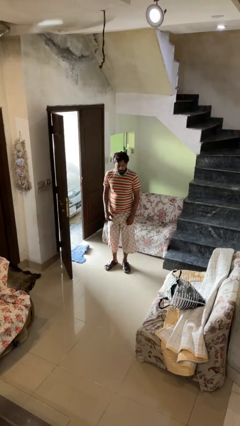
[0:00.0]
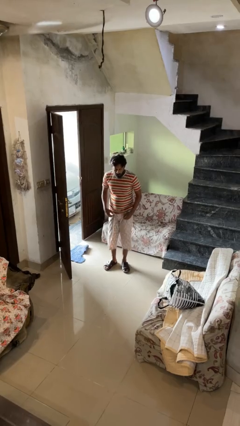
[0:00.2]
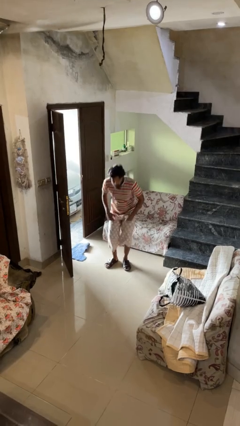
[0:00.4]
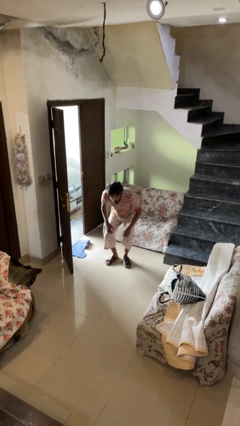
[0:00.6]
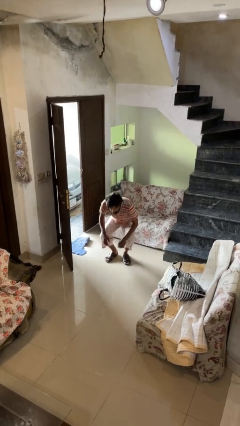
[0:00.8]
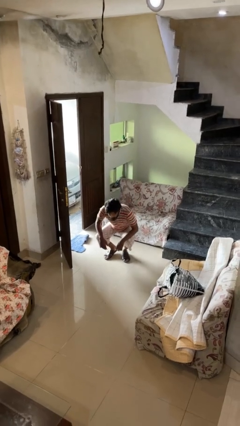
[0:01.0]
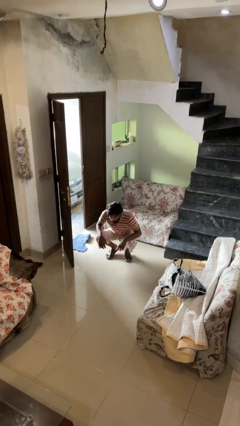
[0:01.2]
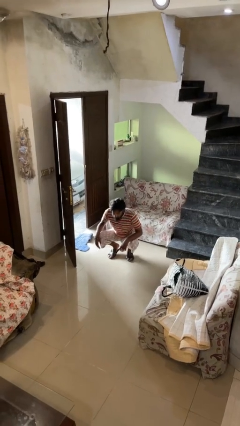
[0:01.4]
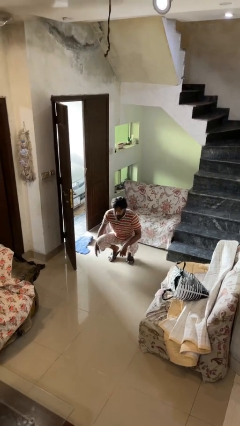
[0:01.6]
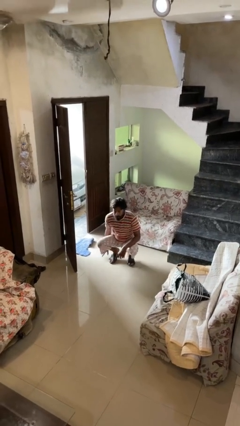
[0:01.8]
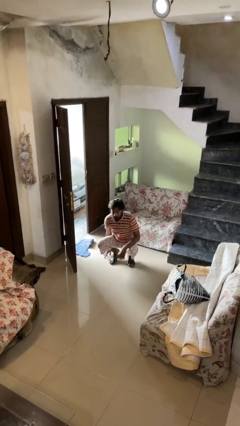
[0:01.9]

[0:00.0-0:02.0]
person squats

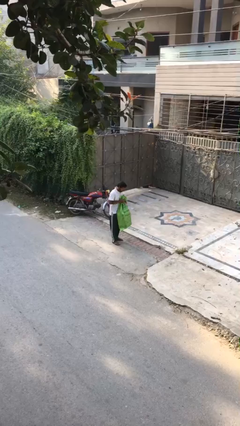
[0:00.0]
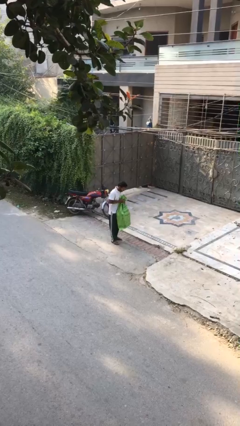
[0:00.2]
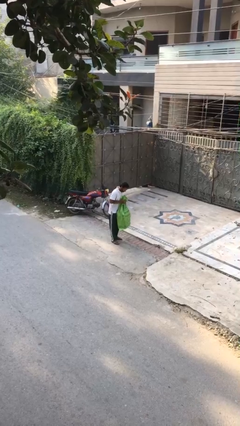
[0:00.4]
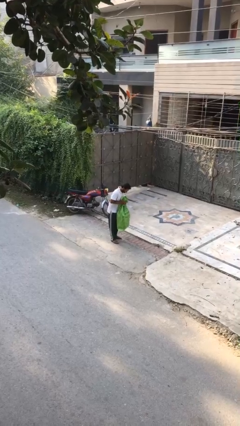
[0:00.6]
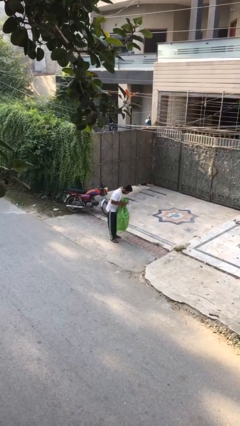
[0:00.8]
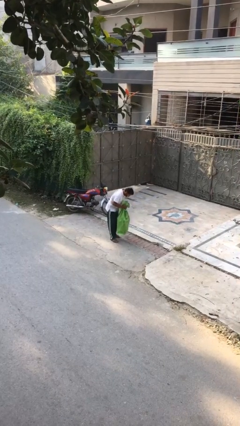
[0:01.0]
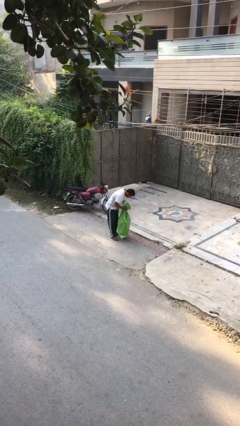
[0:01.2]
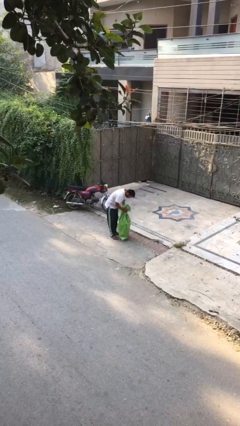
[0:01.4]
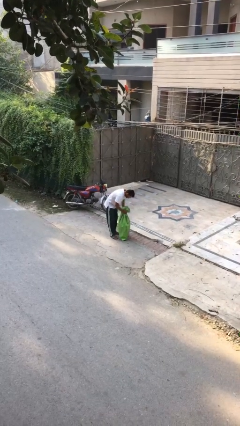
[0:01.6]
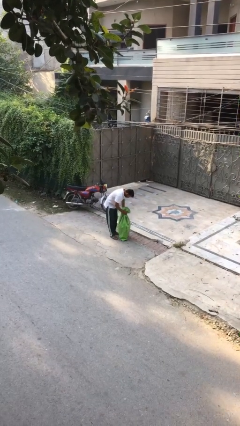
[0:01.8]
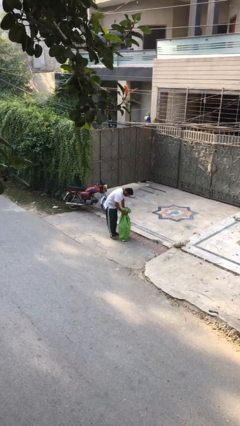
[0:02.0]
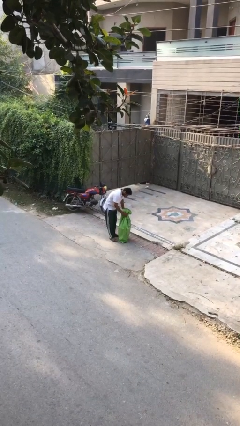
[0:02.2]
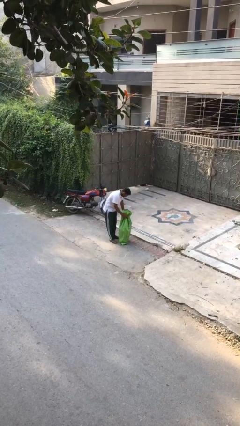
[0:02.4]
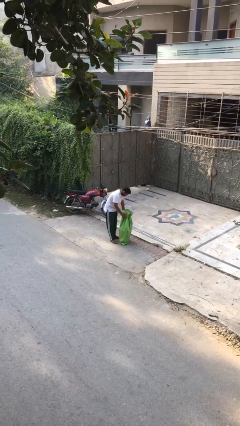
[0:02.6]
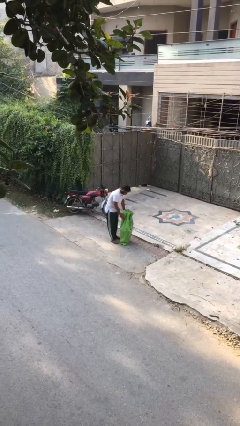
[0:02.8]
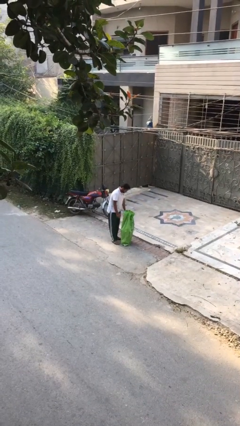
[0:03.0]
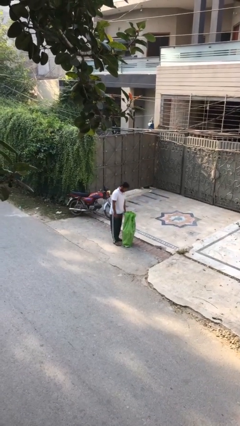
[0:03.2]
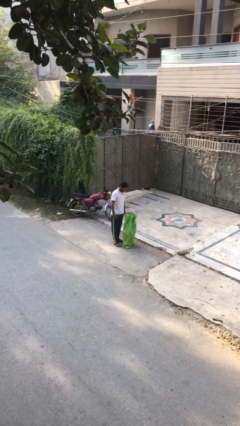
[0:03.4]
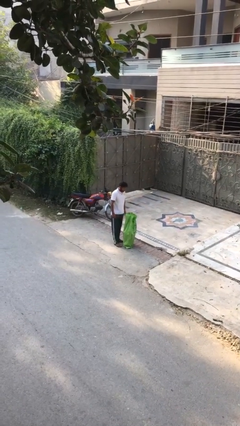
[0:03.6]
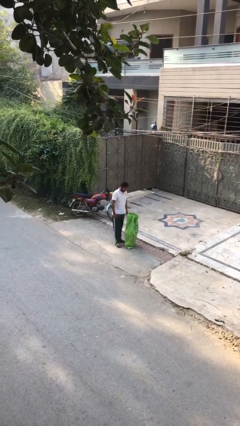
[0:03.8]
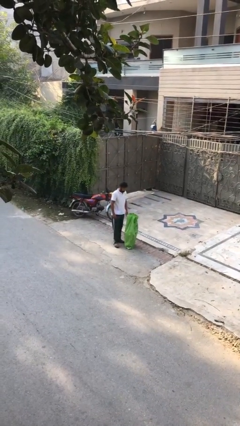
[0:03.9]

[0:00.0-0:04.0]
person puts down object on floor

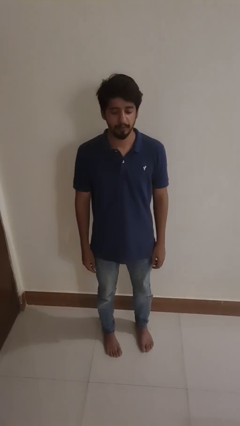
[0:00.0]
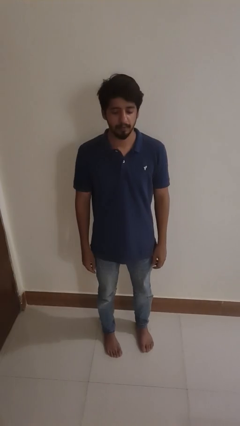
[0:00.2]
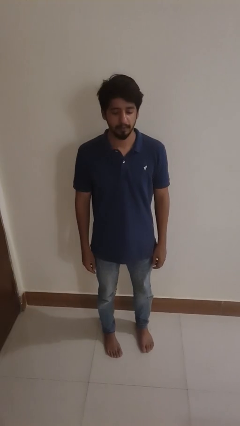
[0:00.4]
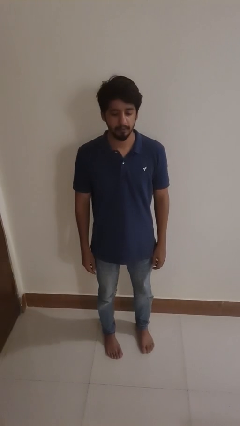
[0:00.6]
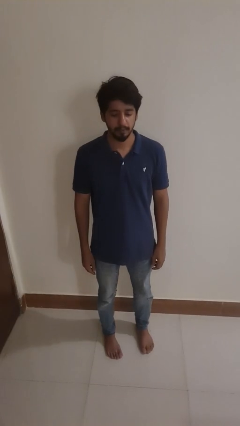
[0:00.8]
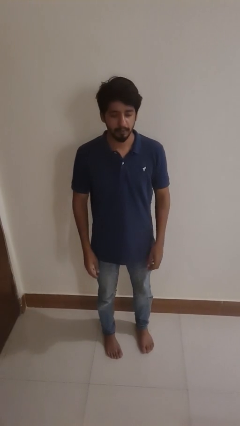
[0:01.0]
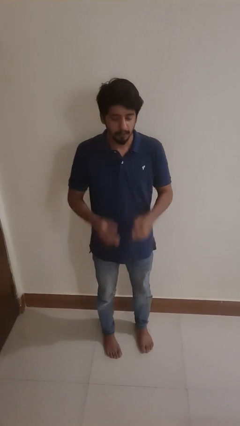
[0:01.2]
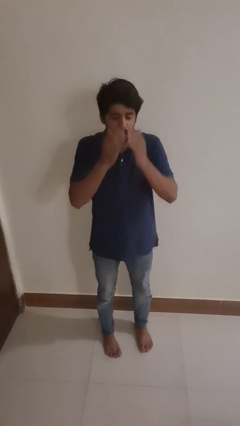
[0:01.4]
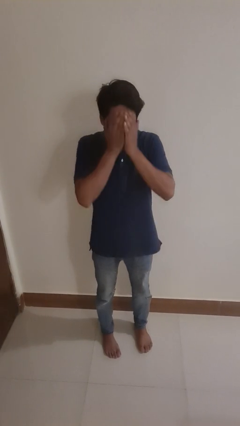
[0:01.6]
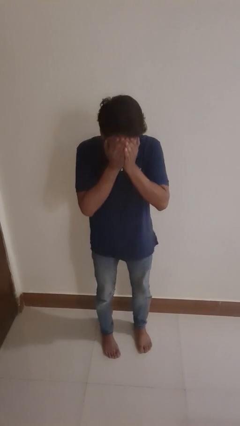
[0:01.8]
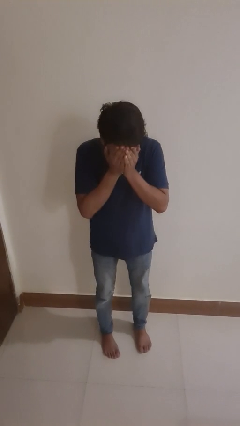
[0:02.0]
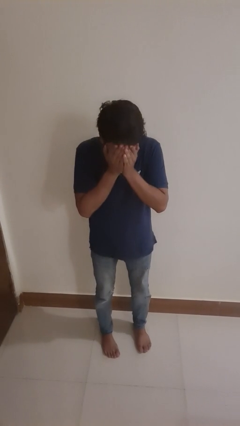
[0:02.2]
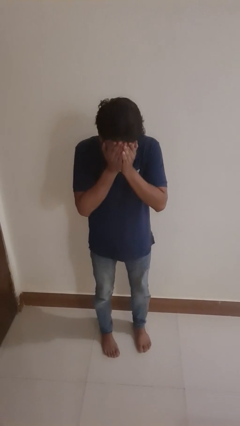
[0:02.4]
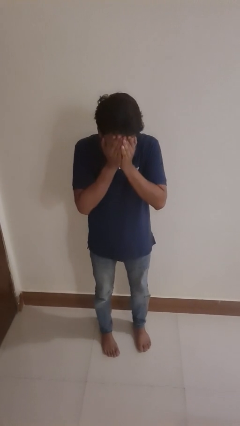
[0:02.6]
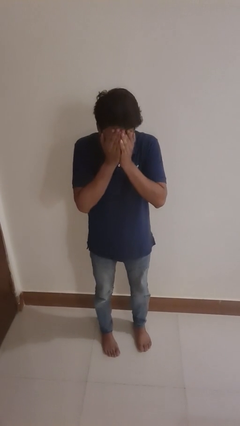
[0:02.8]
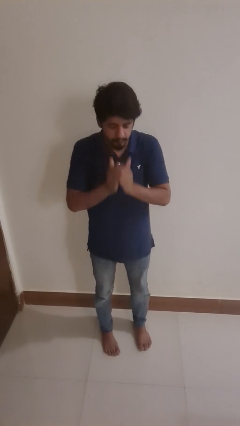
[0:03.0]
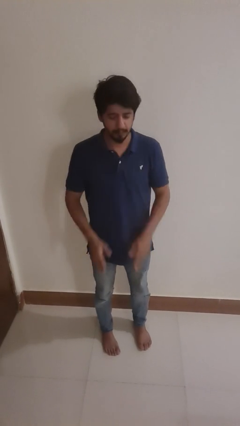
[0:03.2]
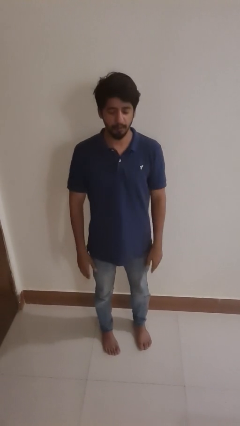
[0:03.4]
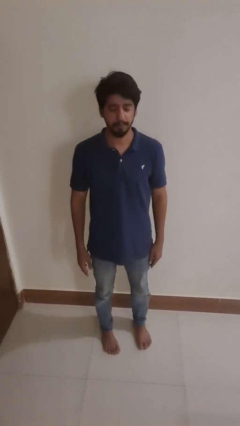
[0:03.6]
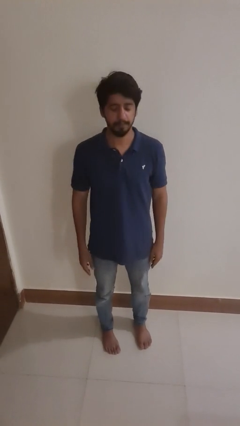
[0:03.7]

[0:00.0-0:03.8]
person sneezes into hand

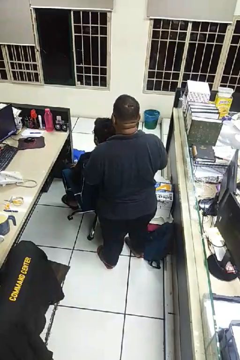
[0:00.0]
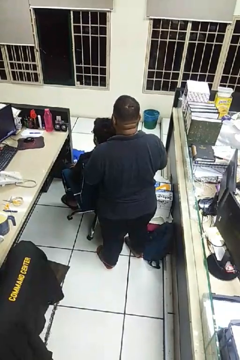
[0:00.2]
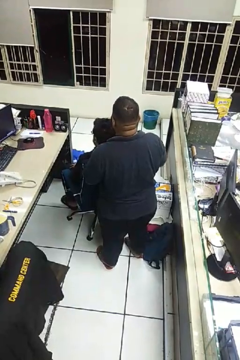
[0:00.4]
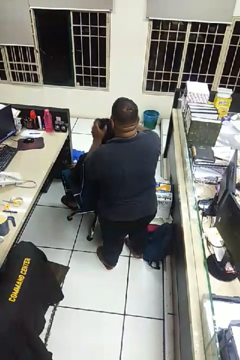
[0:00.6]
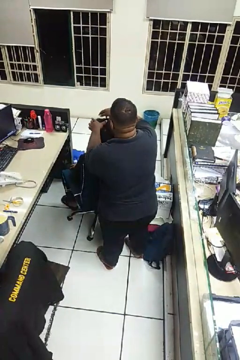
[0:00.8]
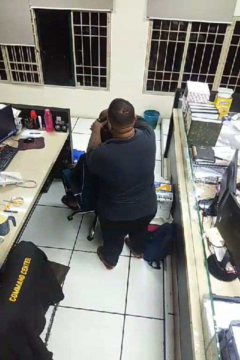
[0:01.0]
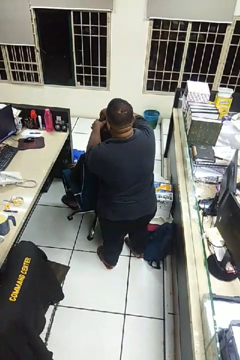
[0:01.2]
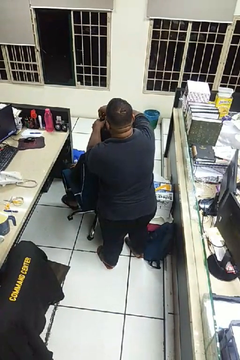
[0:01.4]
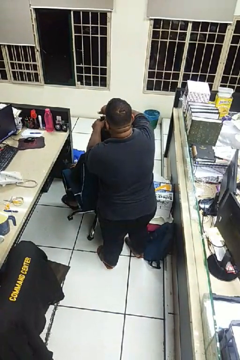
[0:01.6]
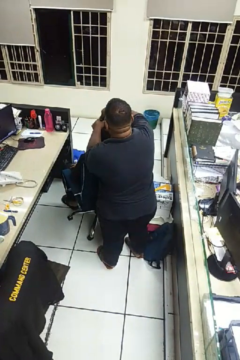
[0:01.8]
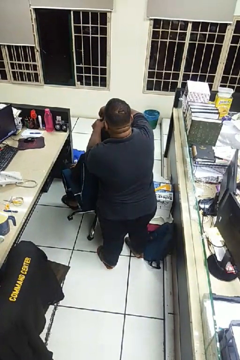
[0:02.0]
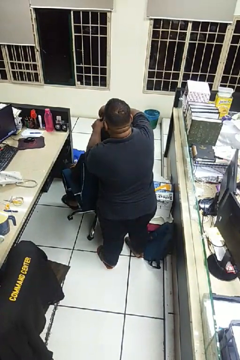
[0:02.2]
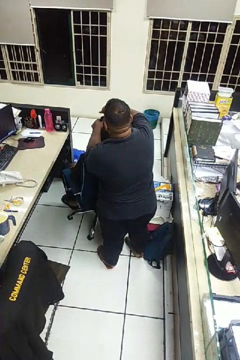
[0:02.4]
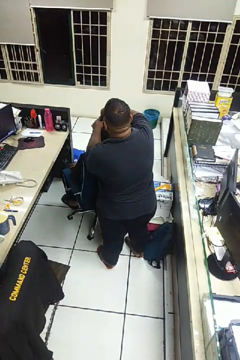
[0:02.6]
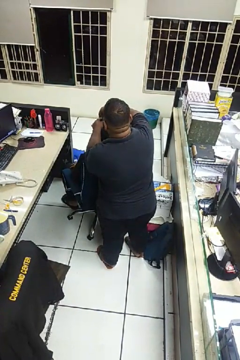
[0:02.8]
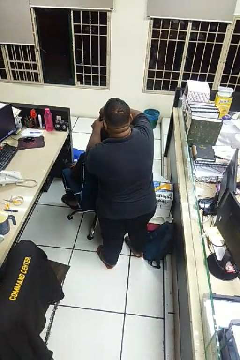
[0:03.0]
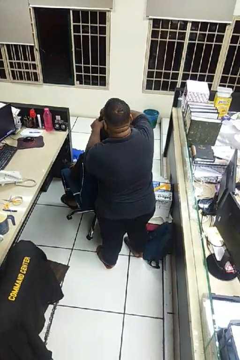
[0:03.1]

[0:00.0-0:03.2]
person braids hair of person

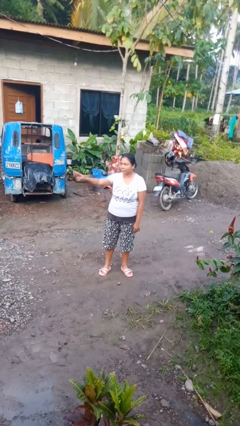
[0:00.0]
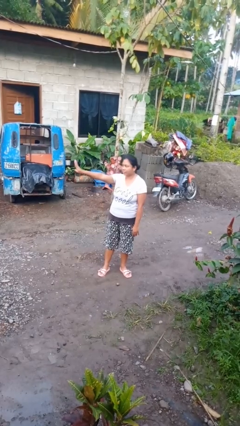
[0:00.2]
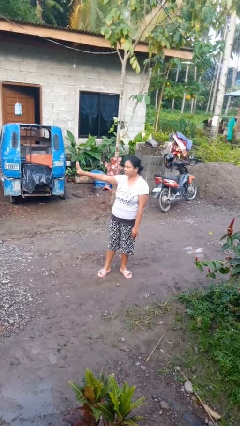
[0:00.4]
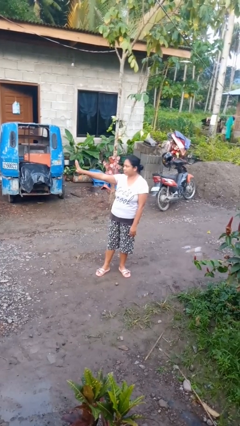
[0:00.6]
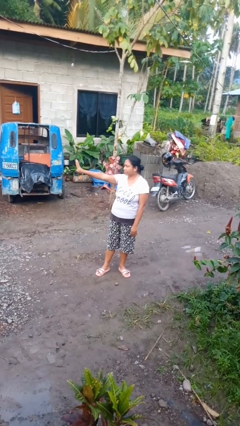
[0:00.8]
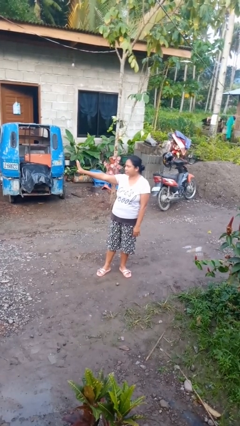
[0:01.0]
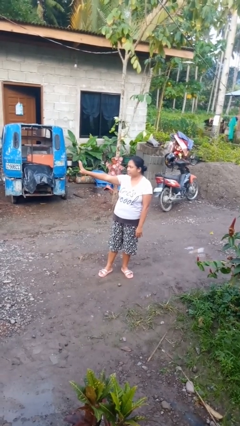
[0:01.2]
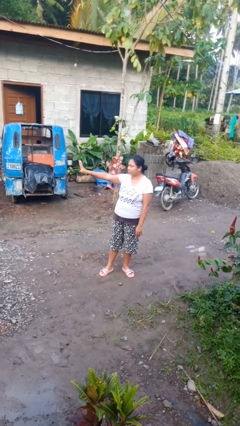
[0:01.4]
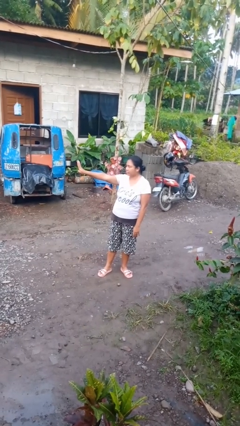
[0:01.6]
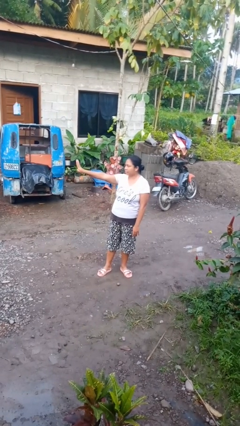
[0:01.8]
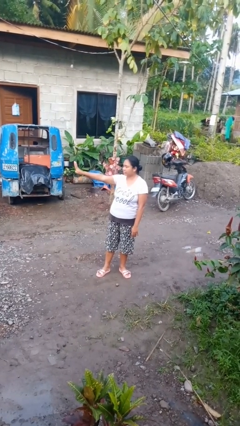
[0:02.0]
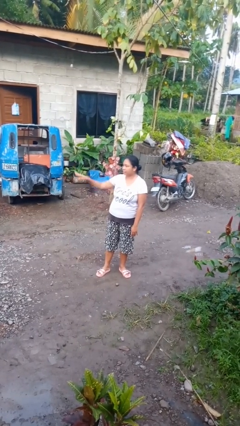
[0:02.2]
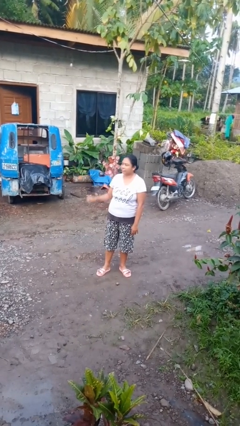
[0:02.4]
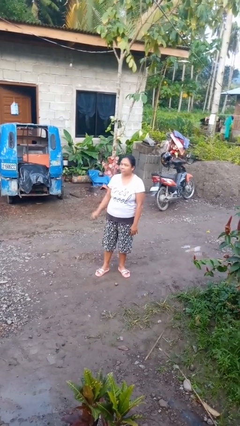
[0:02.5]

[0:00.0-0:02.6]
person gestures number four

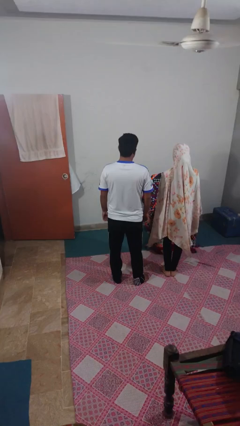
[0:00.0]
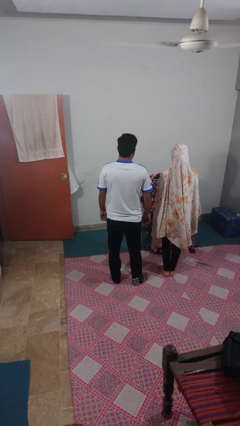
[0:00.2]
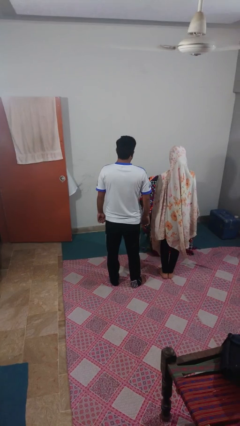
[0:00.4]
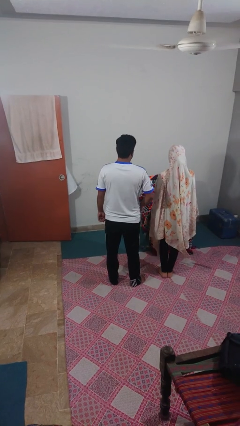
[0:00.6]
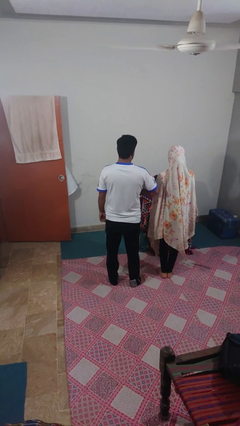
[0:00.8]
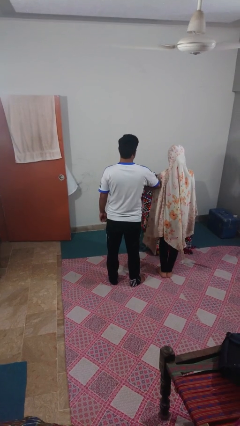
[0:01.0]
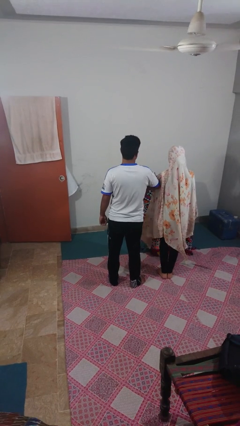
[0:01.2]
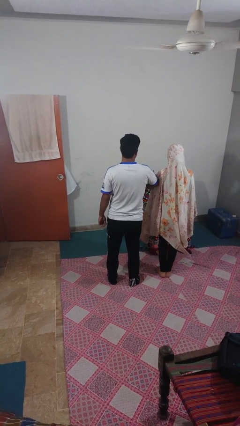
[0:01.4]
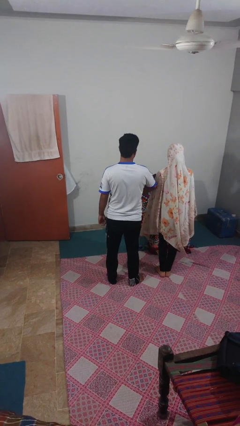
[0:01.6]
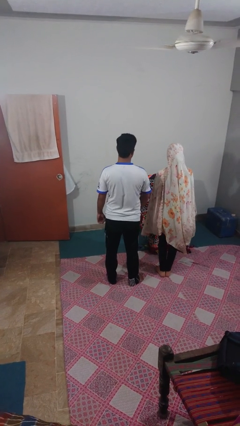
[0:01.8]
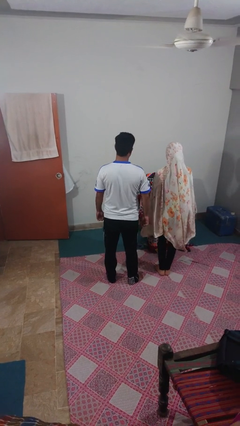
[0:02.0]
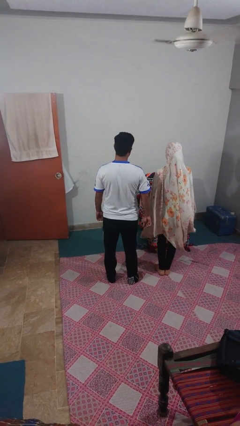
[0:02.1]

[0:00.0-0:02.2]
person nudges person with elbow
